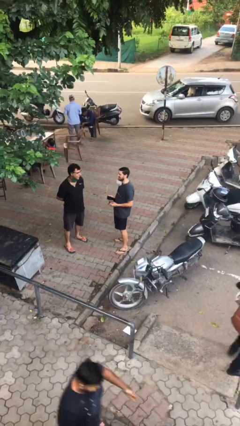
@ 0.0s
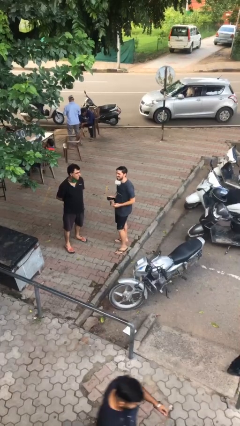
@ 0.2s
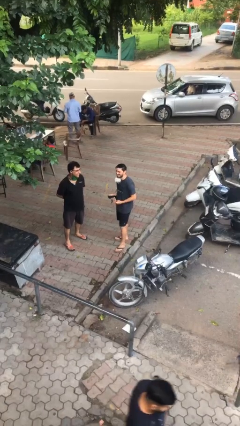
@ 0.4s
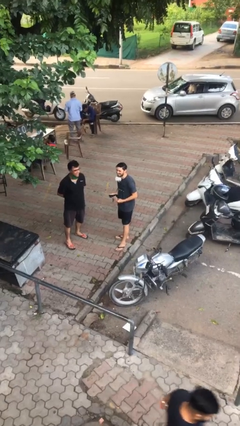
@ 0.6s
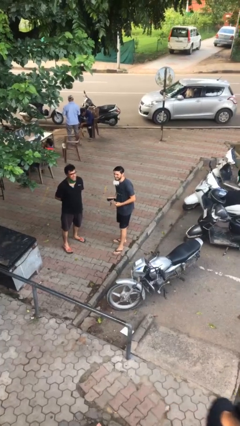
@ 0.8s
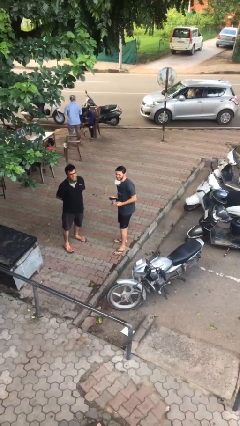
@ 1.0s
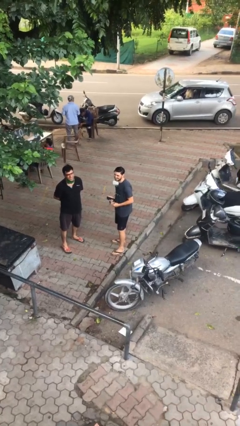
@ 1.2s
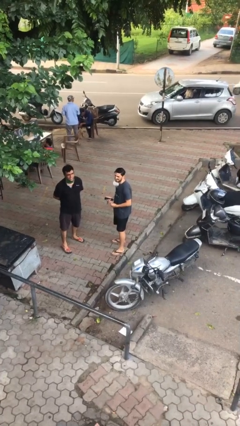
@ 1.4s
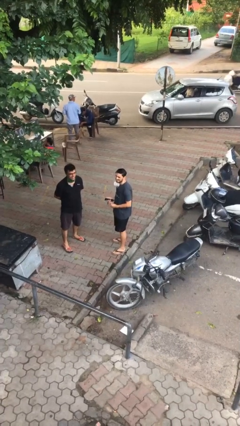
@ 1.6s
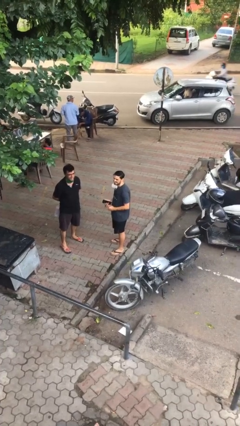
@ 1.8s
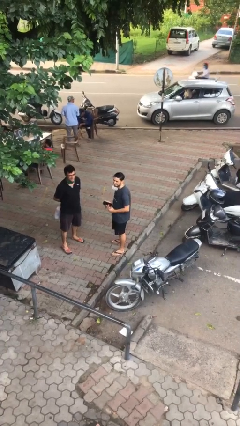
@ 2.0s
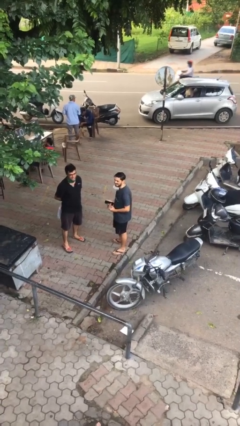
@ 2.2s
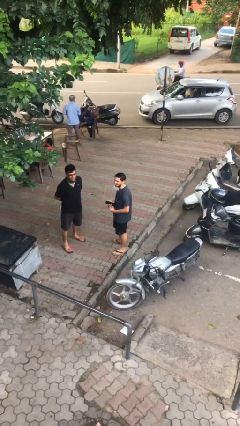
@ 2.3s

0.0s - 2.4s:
person laughs with person

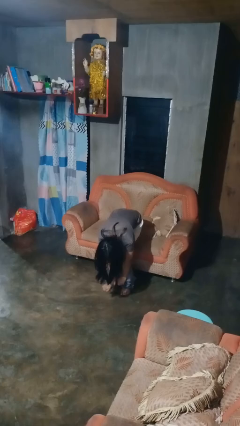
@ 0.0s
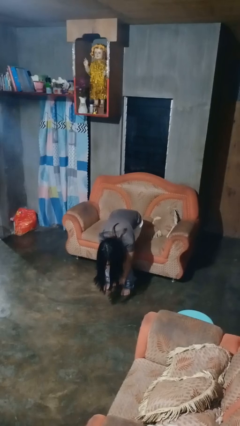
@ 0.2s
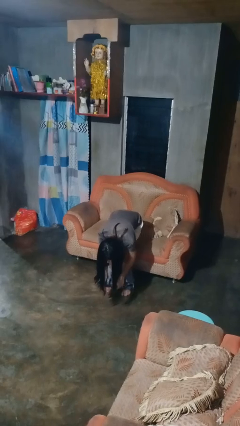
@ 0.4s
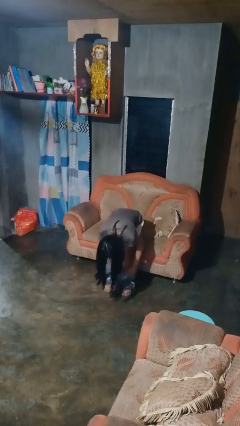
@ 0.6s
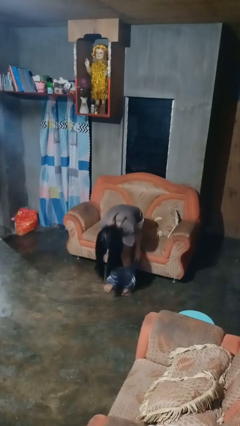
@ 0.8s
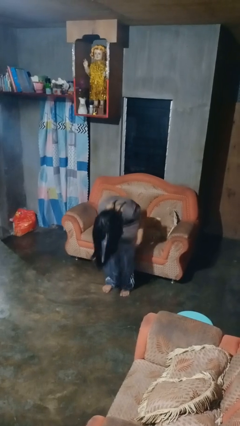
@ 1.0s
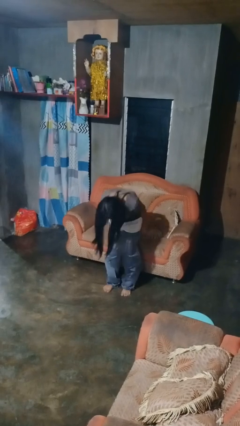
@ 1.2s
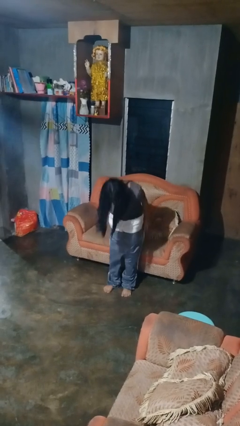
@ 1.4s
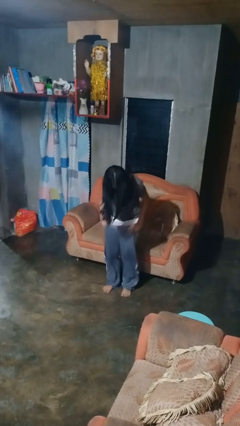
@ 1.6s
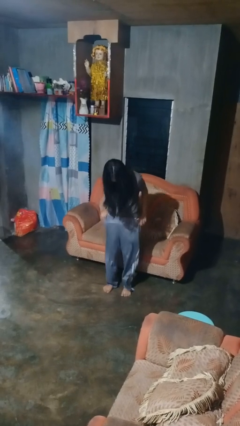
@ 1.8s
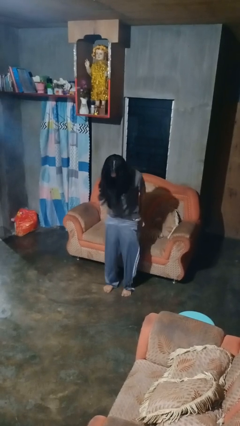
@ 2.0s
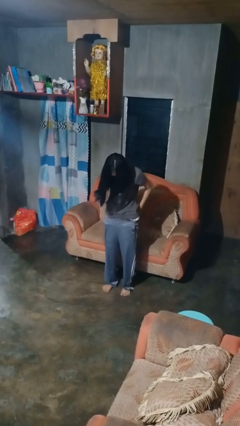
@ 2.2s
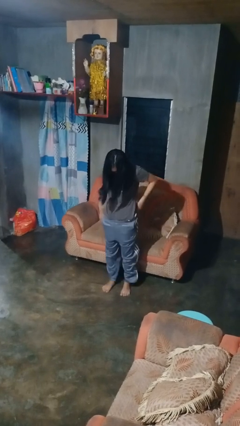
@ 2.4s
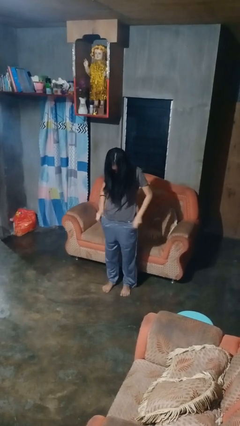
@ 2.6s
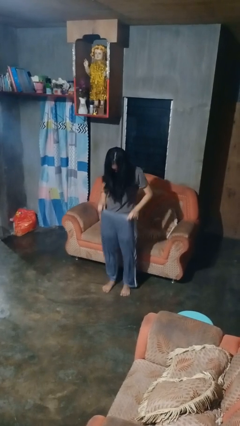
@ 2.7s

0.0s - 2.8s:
person puts on pants

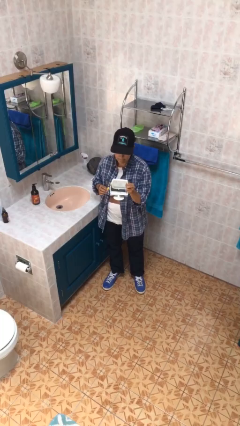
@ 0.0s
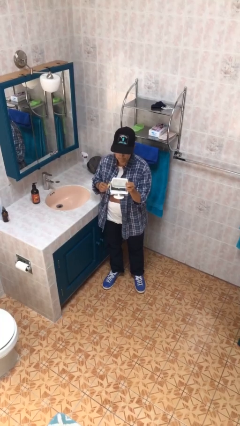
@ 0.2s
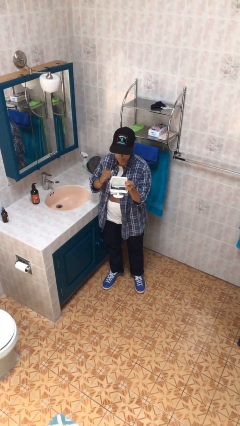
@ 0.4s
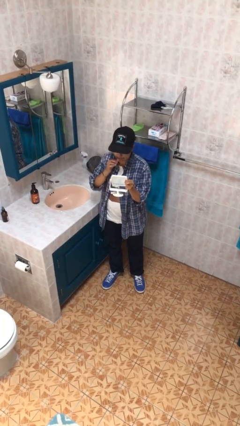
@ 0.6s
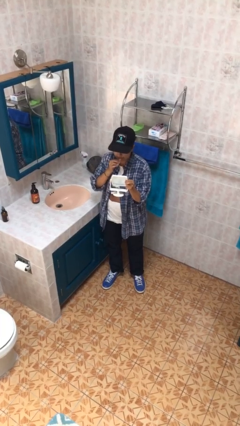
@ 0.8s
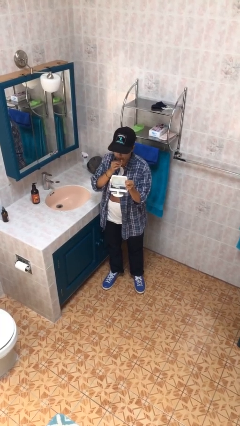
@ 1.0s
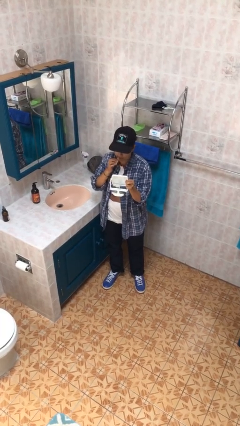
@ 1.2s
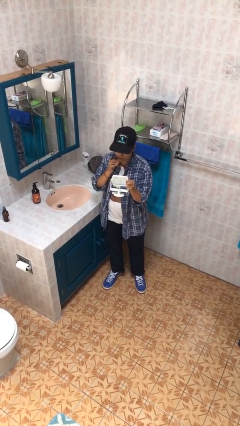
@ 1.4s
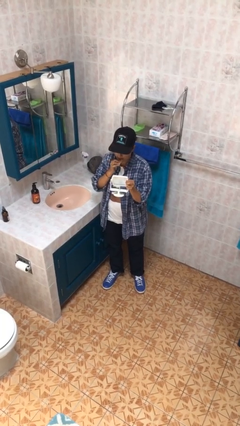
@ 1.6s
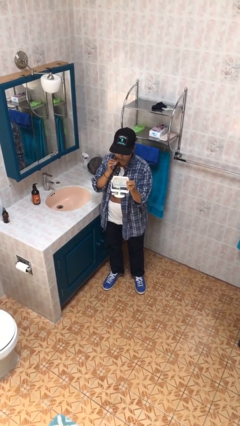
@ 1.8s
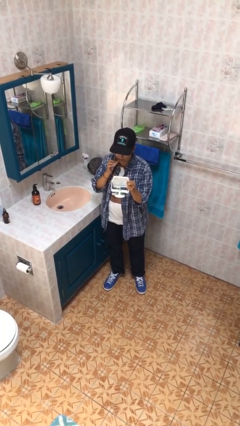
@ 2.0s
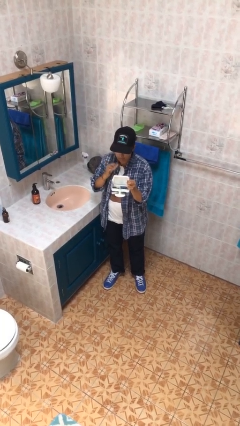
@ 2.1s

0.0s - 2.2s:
person applies lip makeup

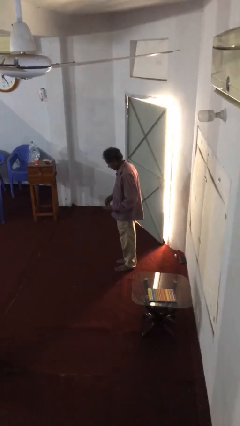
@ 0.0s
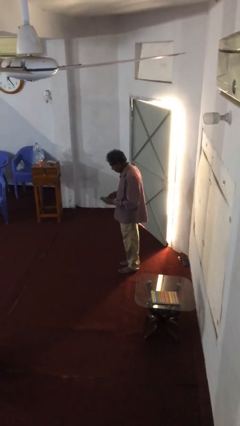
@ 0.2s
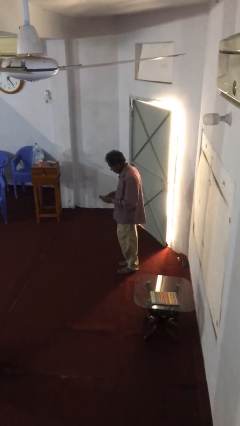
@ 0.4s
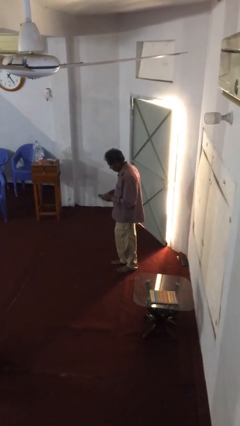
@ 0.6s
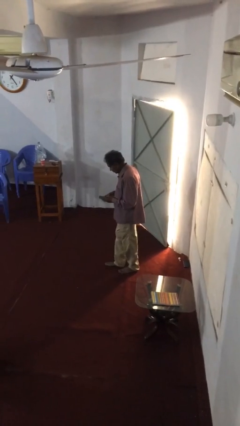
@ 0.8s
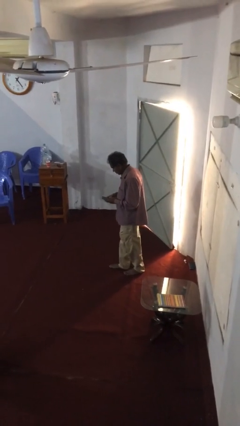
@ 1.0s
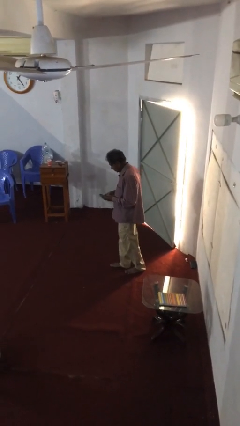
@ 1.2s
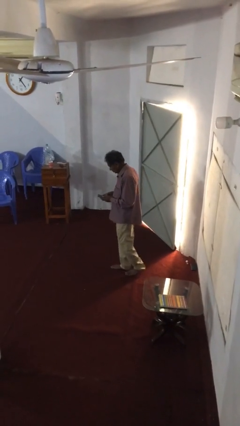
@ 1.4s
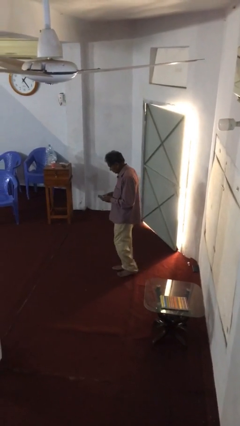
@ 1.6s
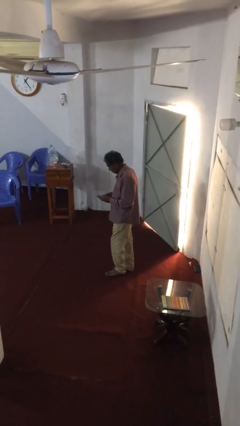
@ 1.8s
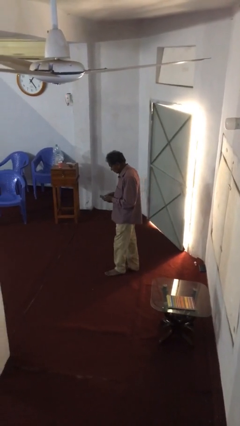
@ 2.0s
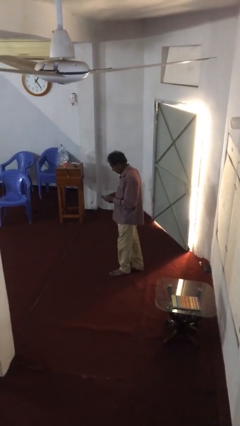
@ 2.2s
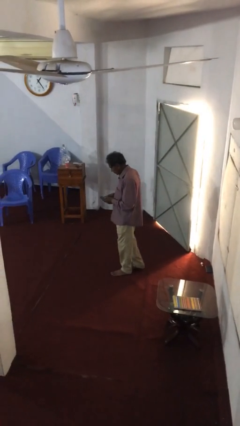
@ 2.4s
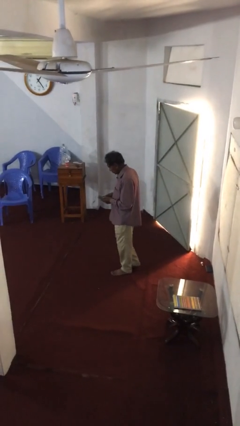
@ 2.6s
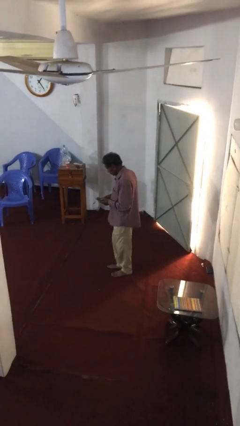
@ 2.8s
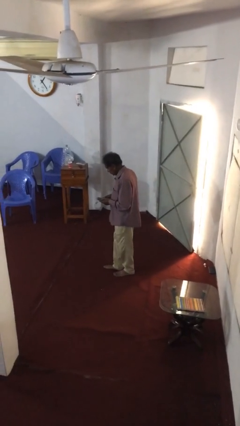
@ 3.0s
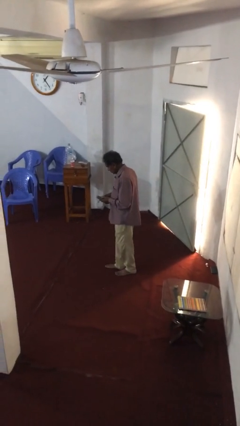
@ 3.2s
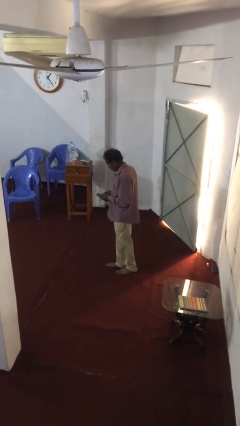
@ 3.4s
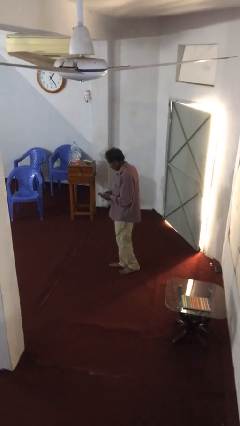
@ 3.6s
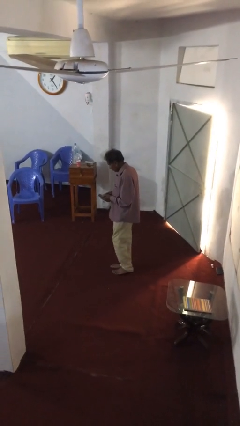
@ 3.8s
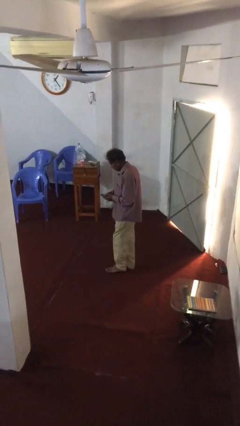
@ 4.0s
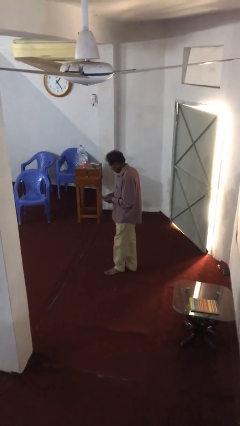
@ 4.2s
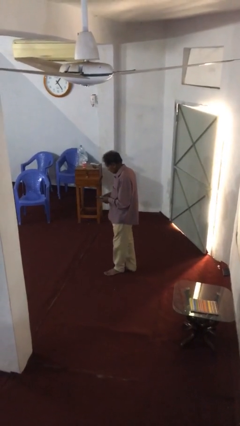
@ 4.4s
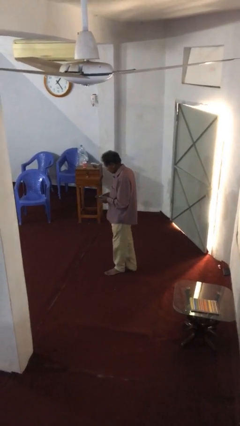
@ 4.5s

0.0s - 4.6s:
person texts on phone

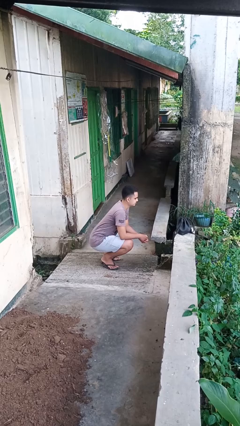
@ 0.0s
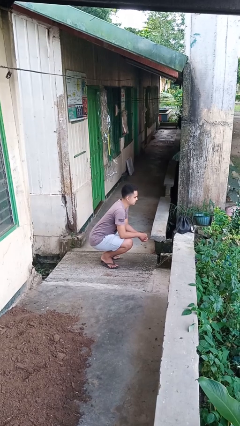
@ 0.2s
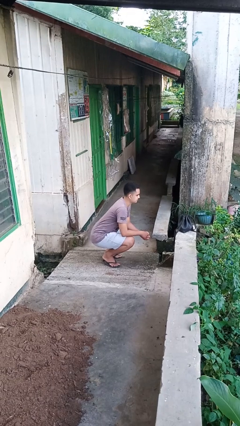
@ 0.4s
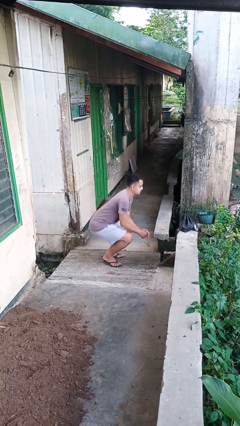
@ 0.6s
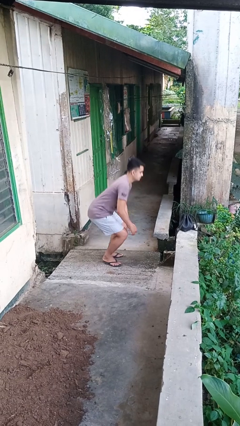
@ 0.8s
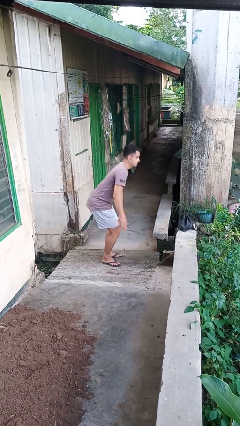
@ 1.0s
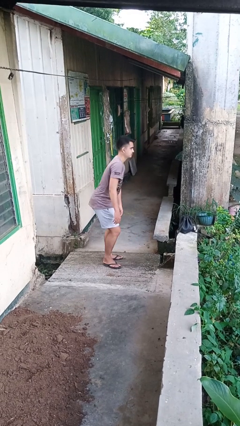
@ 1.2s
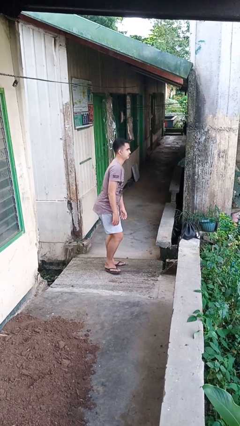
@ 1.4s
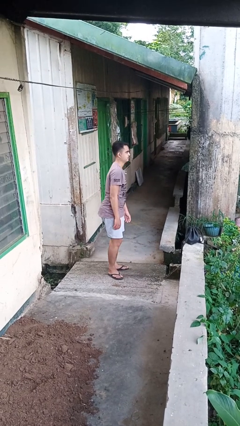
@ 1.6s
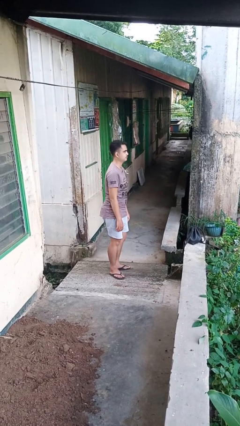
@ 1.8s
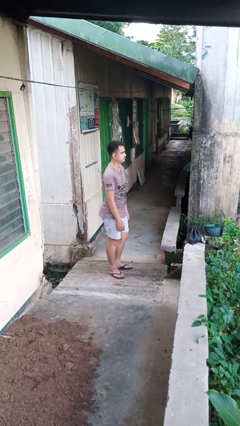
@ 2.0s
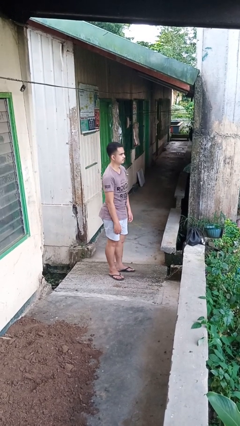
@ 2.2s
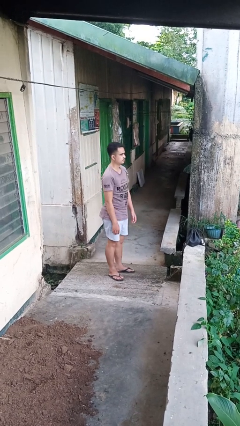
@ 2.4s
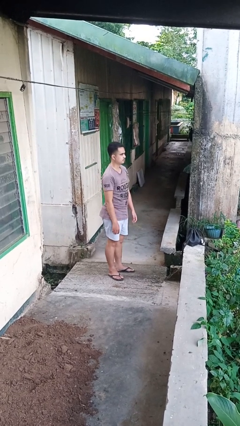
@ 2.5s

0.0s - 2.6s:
person stands up

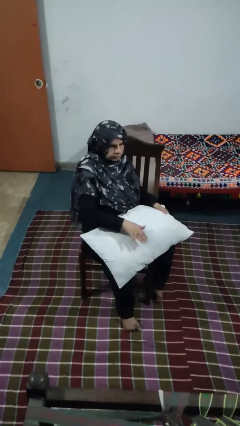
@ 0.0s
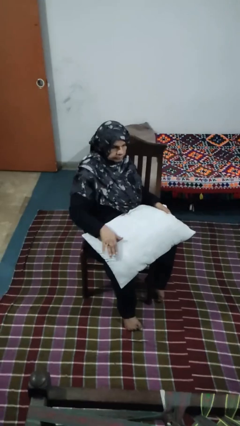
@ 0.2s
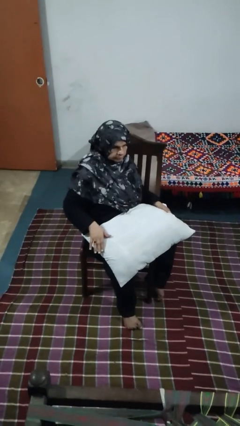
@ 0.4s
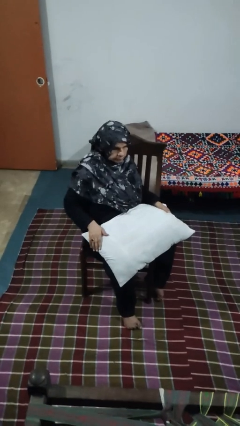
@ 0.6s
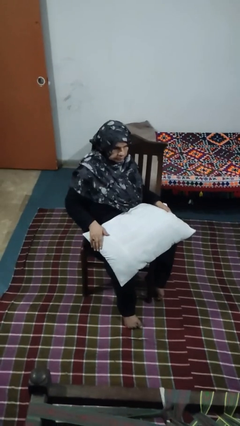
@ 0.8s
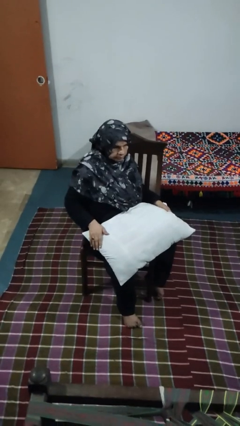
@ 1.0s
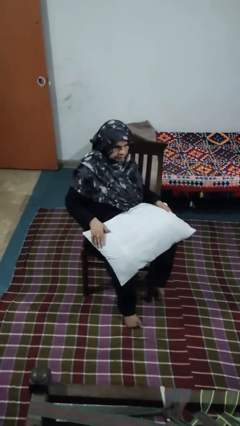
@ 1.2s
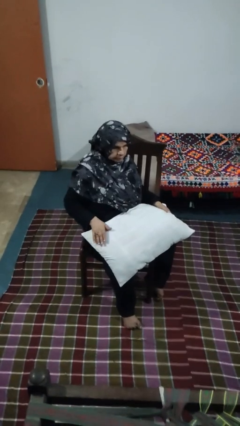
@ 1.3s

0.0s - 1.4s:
person waves hand over object

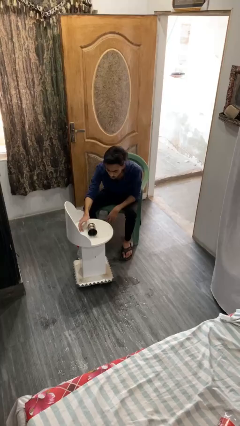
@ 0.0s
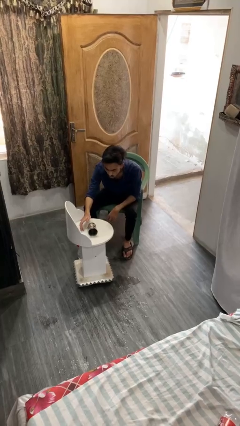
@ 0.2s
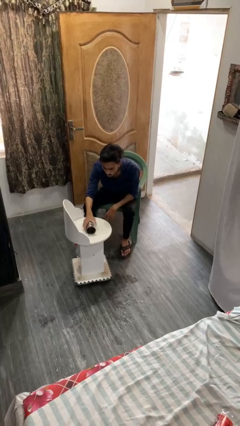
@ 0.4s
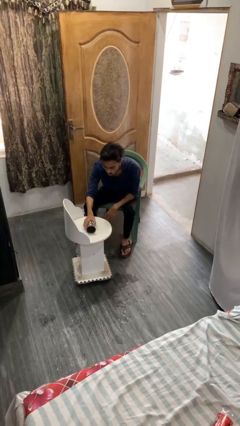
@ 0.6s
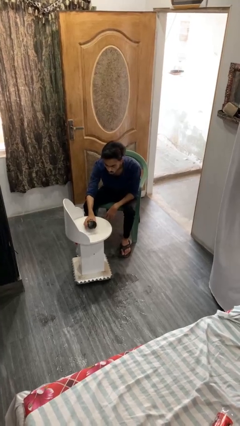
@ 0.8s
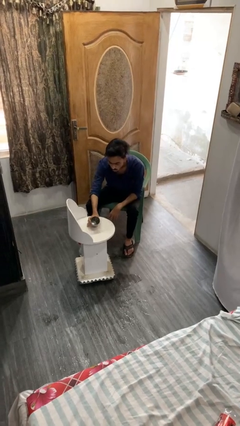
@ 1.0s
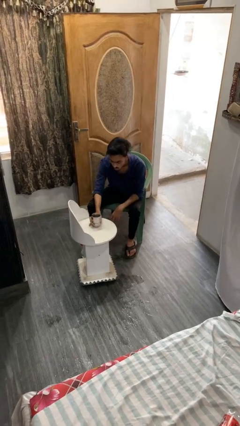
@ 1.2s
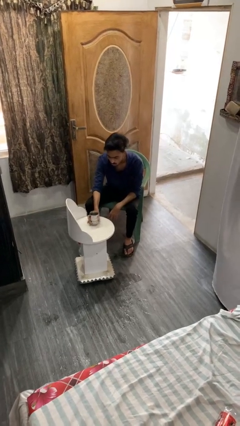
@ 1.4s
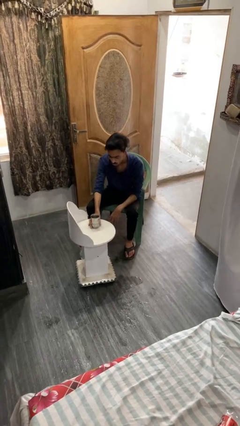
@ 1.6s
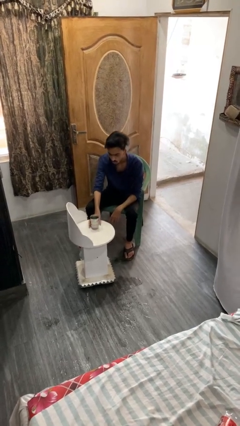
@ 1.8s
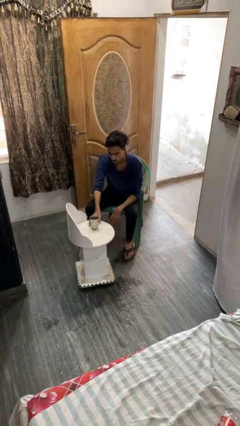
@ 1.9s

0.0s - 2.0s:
person sets upright glass
